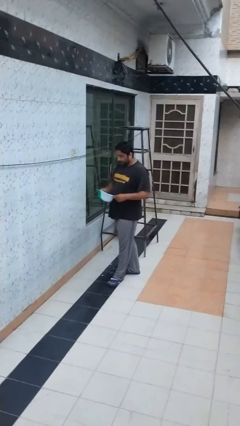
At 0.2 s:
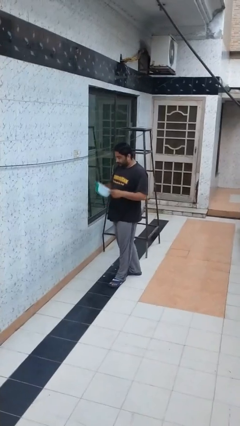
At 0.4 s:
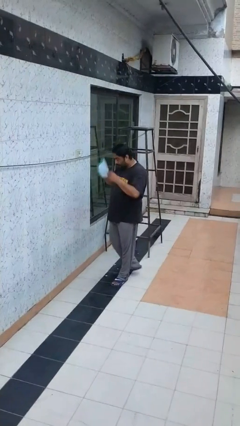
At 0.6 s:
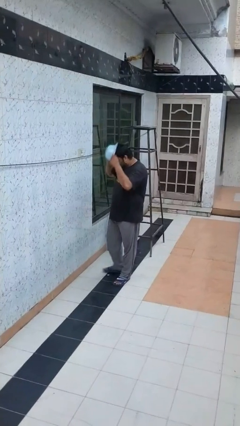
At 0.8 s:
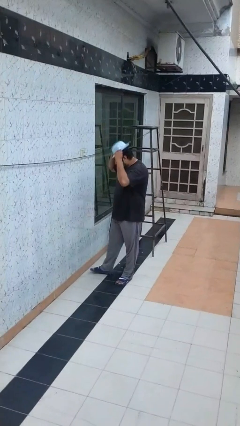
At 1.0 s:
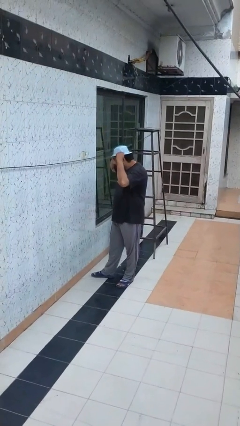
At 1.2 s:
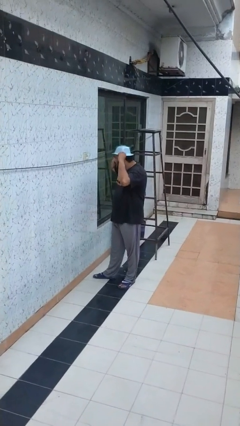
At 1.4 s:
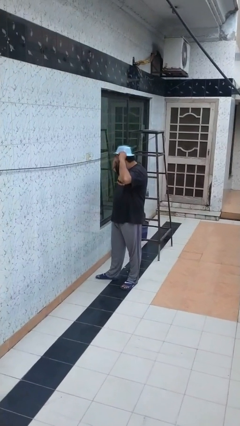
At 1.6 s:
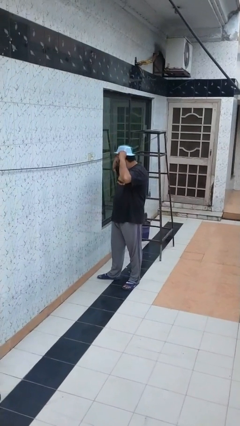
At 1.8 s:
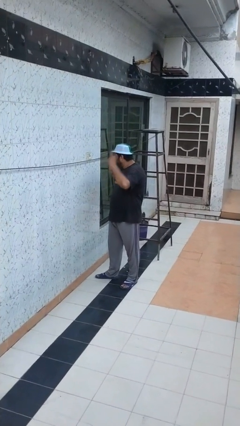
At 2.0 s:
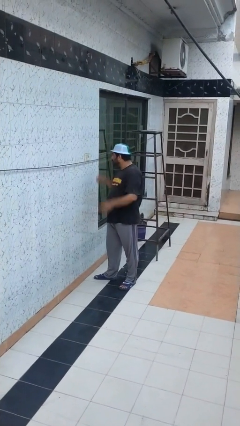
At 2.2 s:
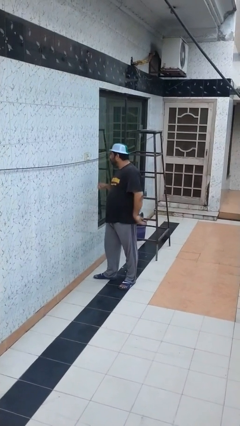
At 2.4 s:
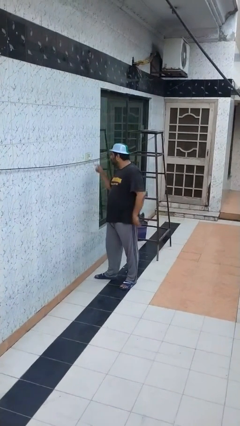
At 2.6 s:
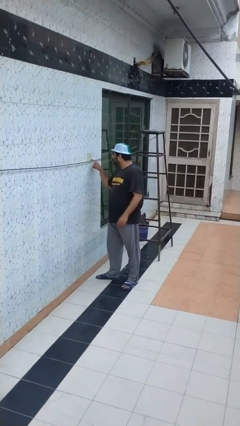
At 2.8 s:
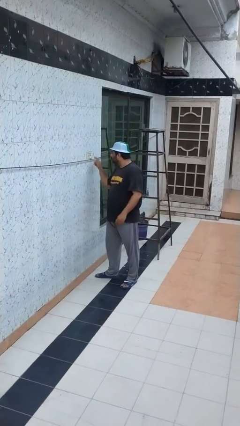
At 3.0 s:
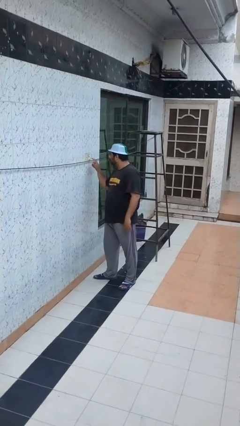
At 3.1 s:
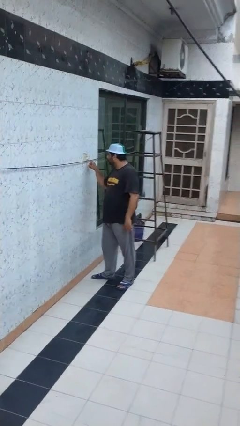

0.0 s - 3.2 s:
person puts on hat

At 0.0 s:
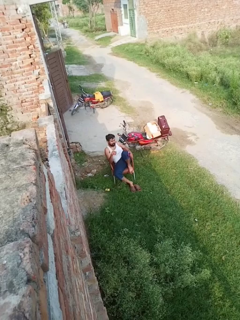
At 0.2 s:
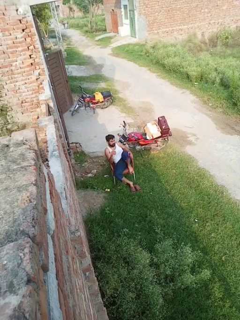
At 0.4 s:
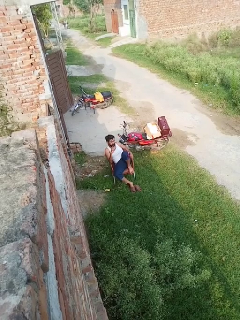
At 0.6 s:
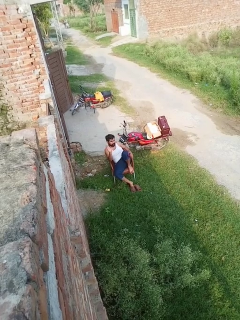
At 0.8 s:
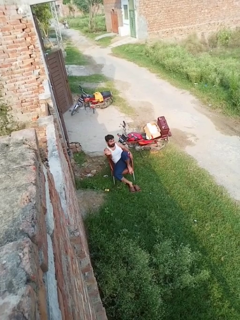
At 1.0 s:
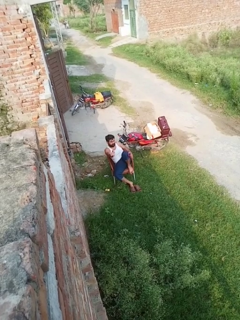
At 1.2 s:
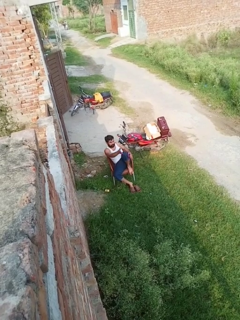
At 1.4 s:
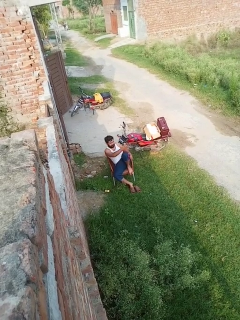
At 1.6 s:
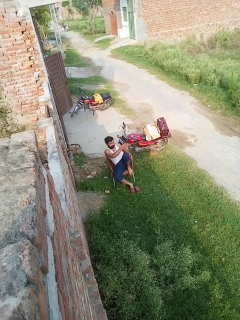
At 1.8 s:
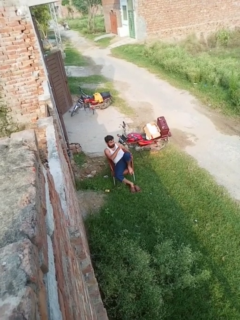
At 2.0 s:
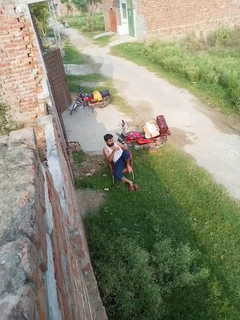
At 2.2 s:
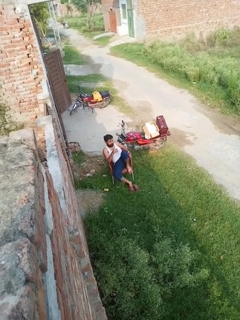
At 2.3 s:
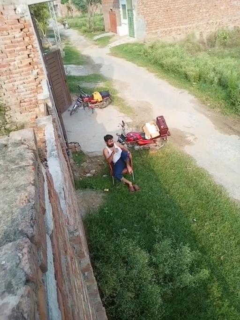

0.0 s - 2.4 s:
person gestures swipe left

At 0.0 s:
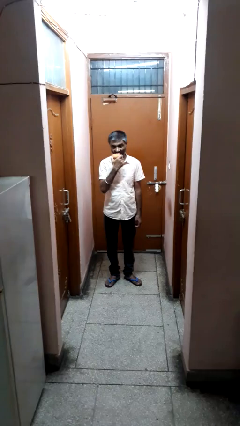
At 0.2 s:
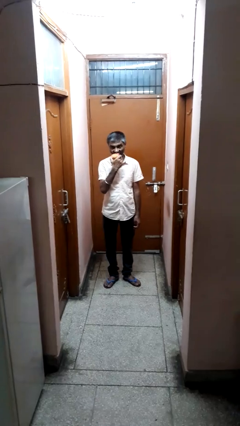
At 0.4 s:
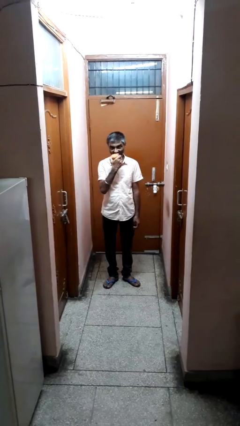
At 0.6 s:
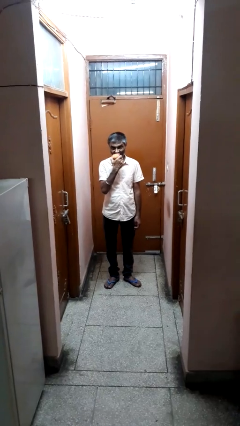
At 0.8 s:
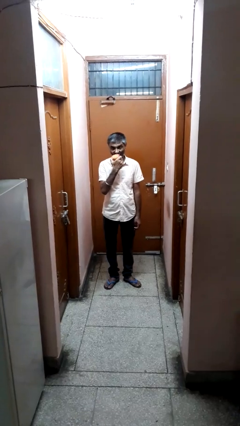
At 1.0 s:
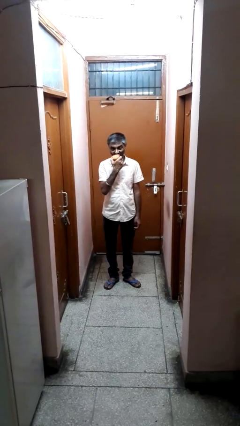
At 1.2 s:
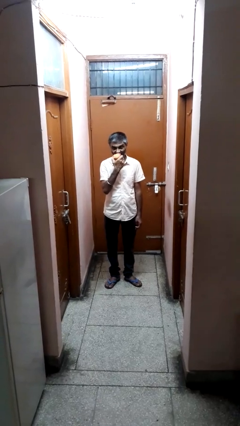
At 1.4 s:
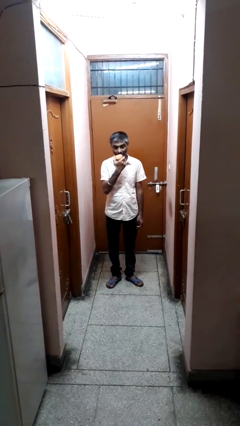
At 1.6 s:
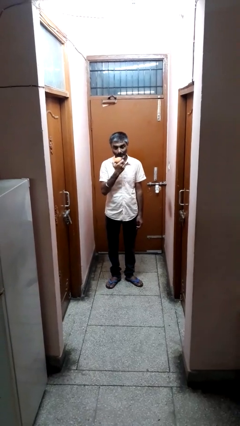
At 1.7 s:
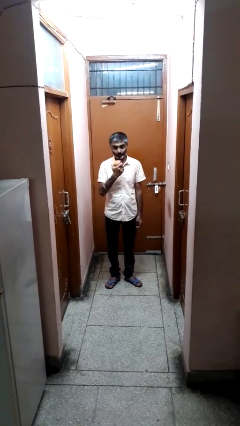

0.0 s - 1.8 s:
person eats apple

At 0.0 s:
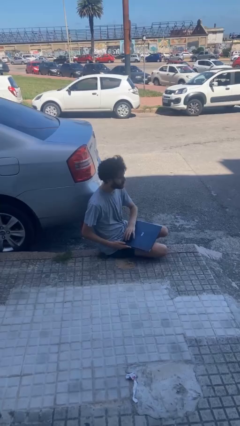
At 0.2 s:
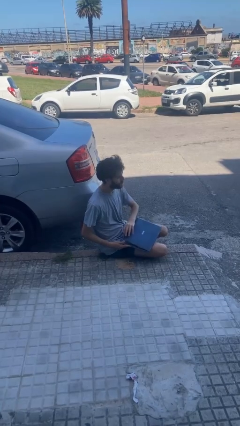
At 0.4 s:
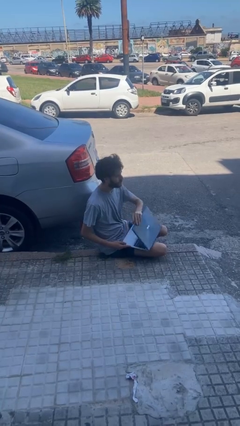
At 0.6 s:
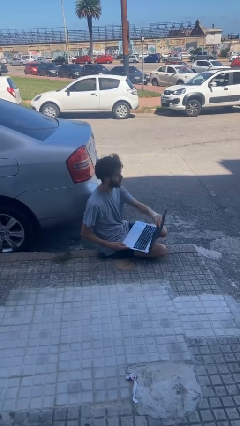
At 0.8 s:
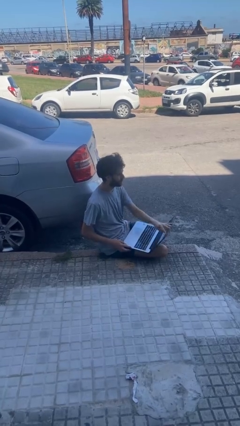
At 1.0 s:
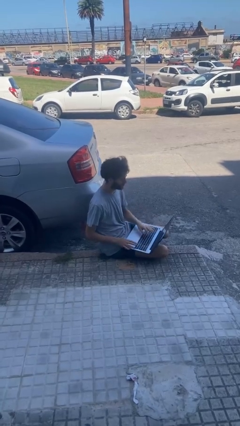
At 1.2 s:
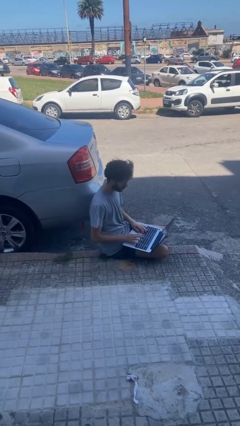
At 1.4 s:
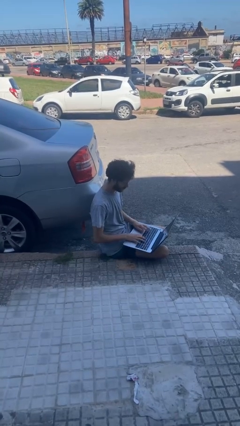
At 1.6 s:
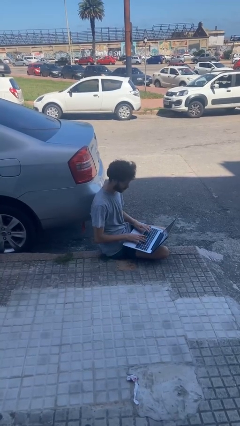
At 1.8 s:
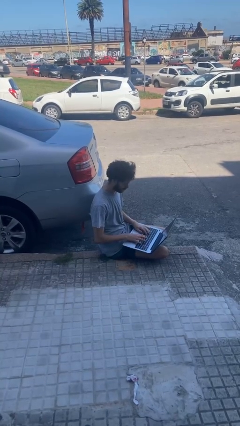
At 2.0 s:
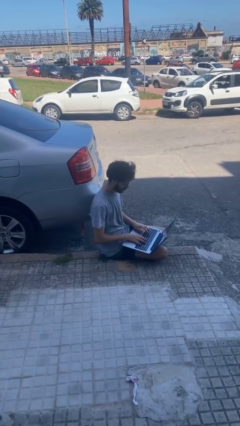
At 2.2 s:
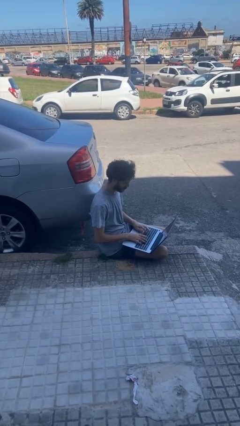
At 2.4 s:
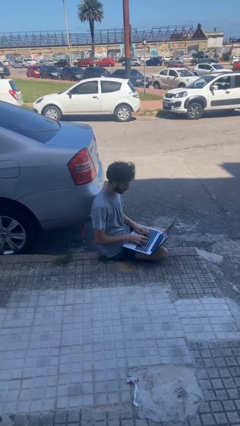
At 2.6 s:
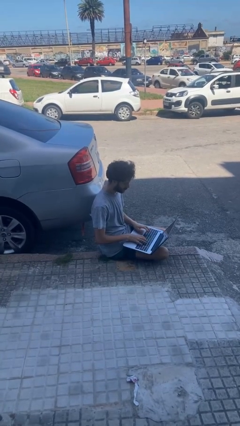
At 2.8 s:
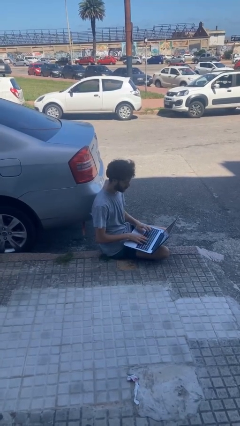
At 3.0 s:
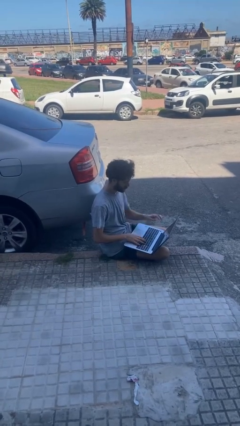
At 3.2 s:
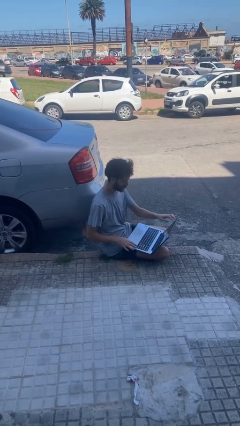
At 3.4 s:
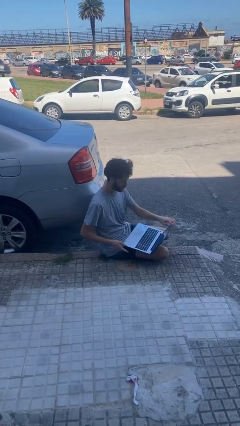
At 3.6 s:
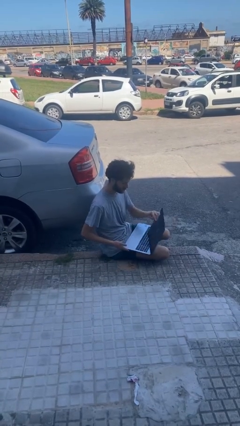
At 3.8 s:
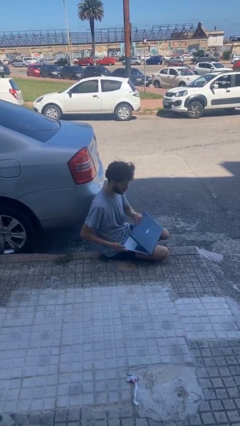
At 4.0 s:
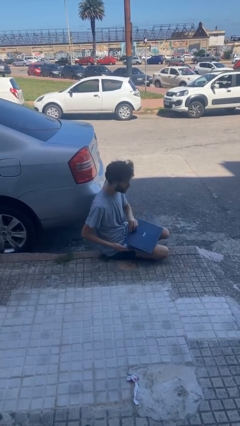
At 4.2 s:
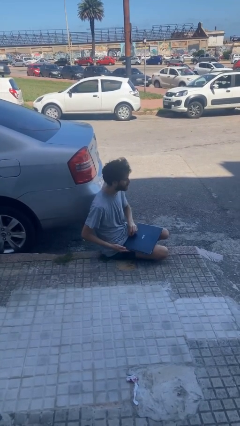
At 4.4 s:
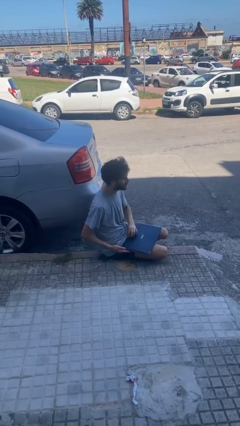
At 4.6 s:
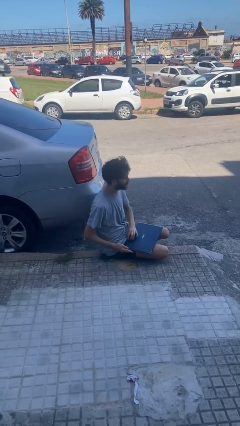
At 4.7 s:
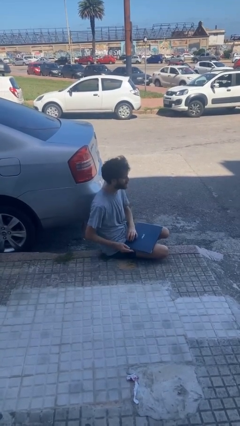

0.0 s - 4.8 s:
person interacts with laptop

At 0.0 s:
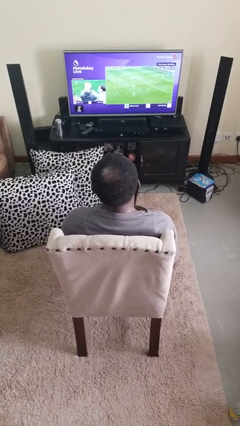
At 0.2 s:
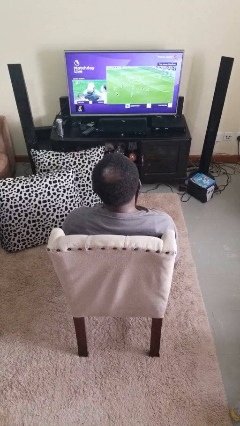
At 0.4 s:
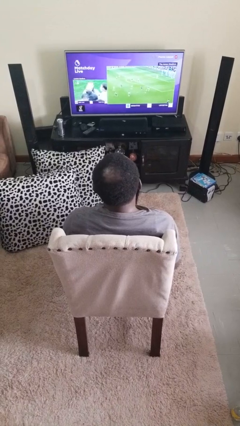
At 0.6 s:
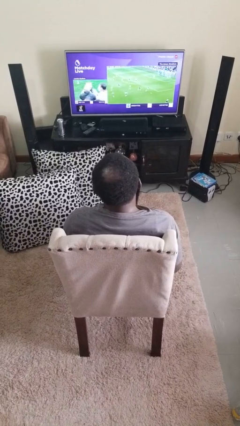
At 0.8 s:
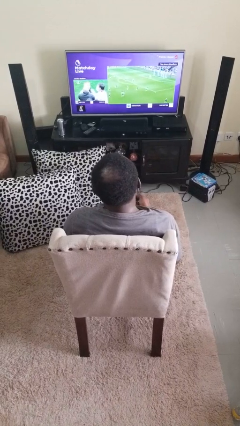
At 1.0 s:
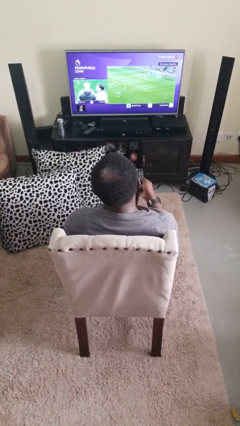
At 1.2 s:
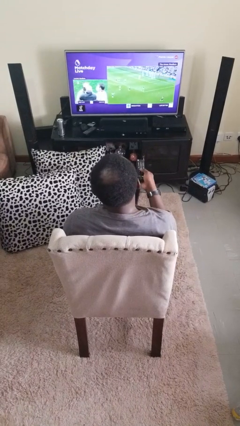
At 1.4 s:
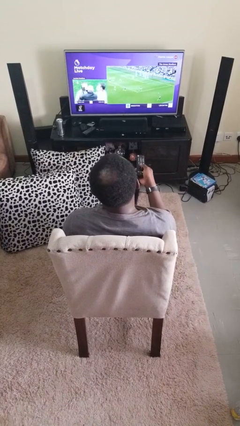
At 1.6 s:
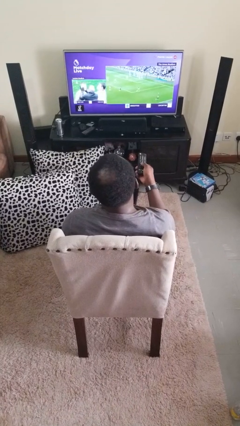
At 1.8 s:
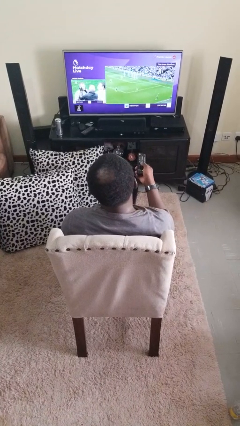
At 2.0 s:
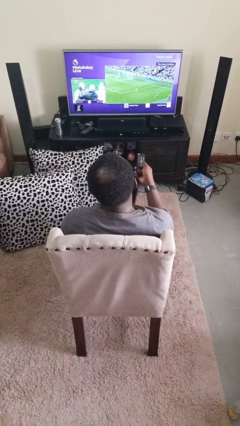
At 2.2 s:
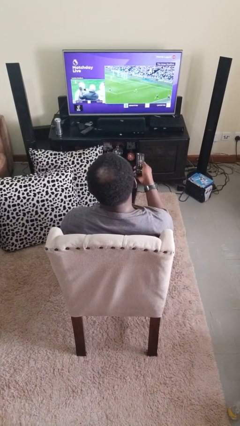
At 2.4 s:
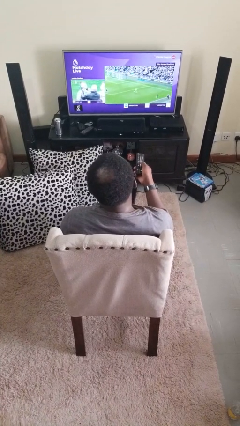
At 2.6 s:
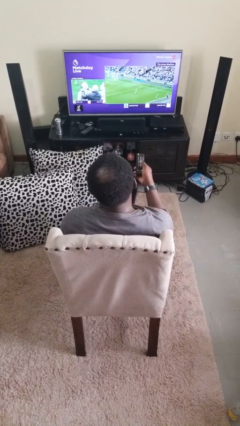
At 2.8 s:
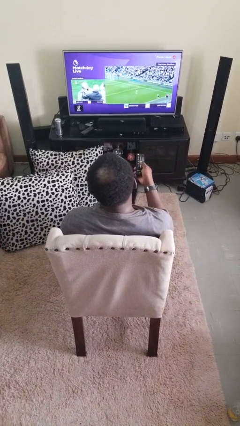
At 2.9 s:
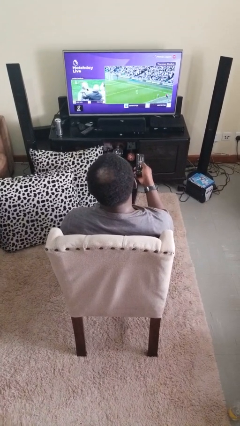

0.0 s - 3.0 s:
person uses television remote

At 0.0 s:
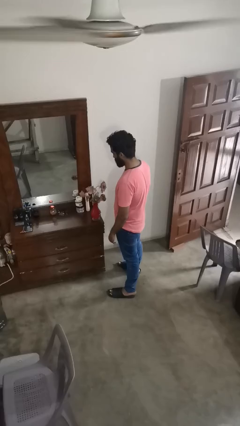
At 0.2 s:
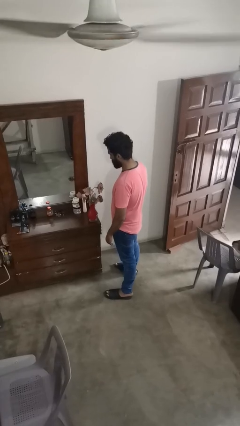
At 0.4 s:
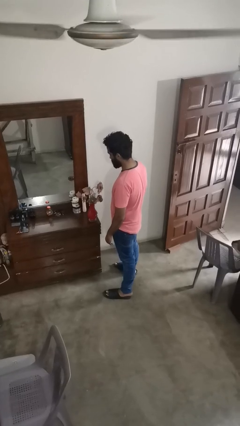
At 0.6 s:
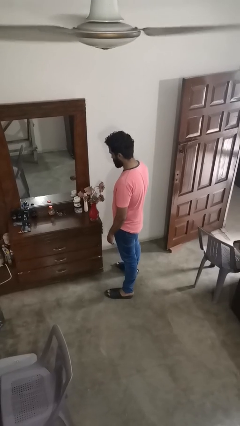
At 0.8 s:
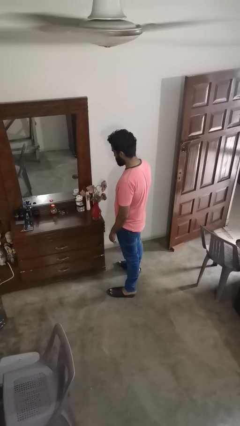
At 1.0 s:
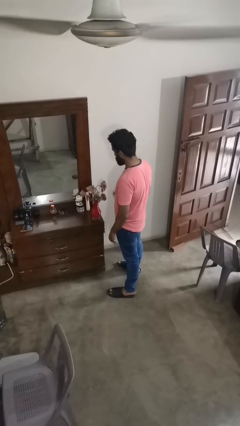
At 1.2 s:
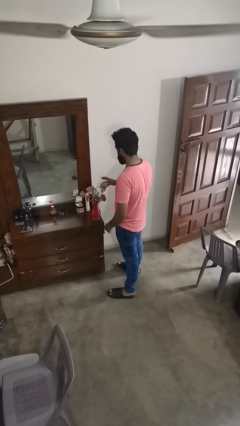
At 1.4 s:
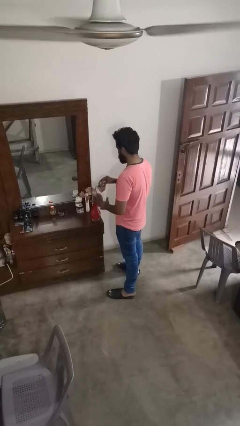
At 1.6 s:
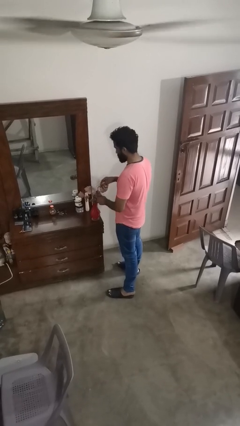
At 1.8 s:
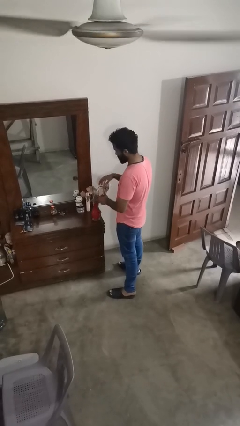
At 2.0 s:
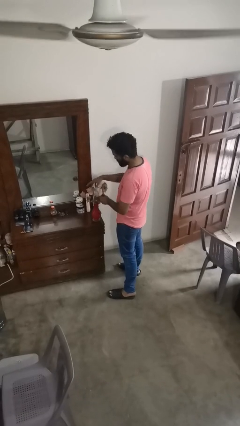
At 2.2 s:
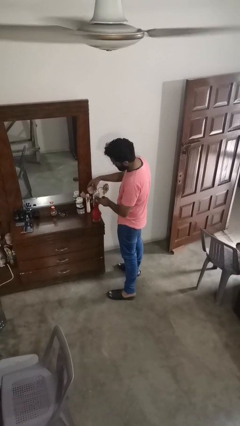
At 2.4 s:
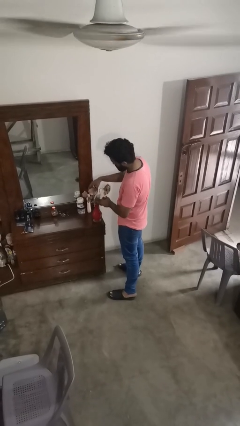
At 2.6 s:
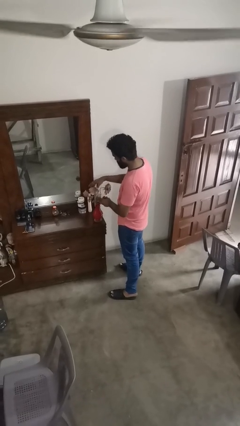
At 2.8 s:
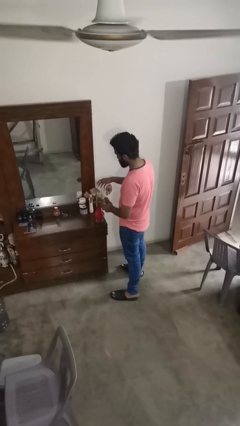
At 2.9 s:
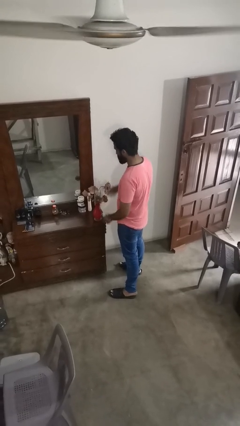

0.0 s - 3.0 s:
person arranges flowers in vase
